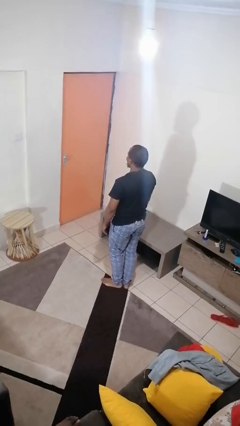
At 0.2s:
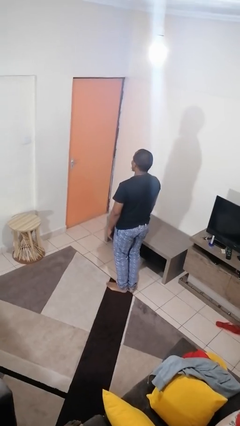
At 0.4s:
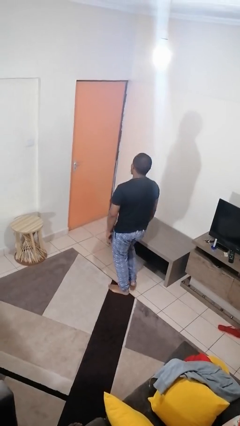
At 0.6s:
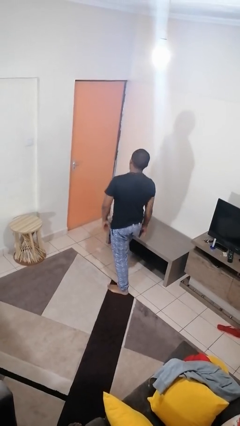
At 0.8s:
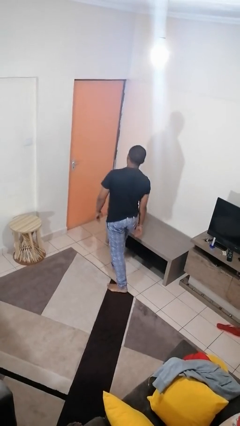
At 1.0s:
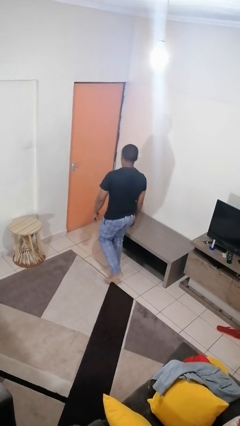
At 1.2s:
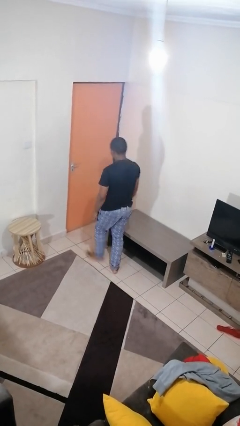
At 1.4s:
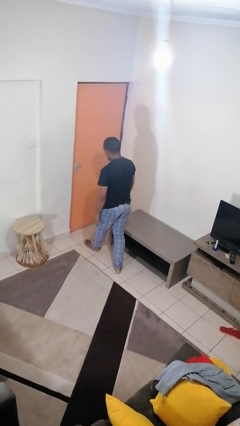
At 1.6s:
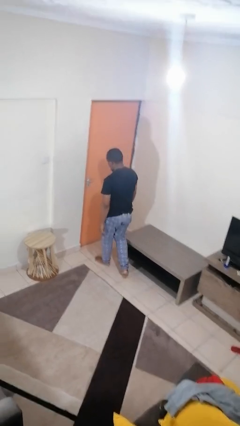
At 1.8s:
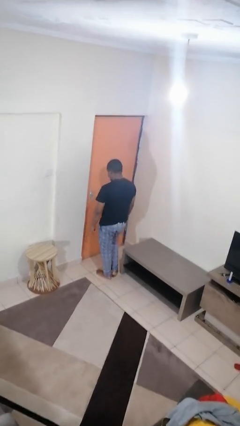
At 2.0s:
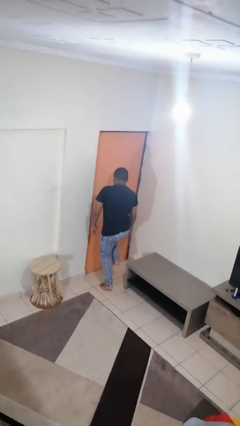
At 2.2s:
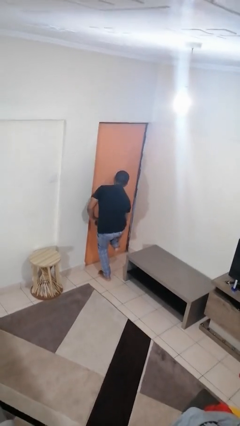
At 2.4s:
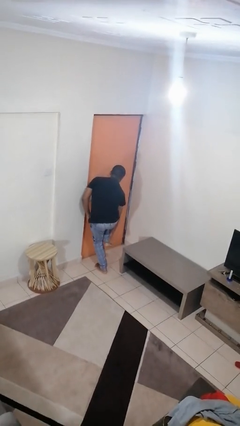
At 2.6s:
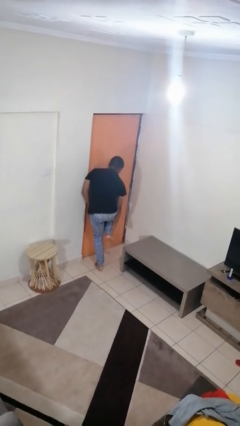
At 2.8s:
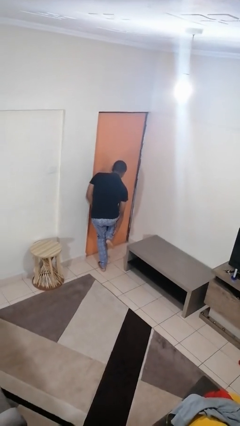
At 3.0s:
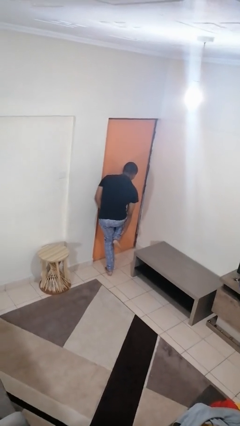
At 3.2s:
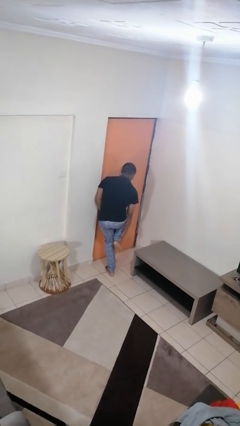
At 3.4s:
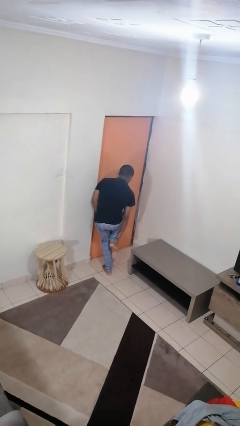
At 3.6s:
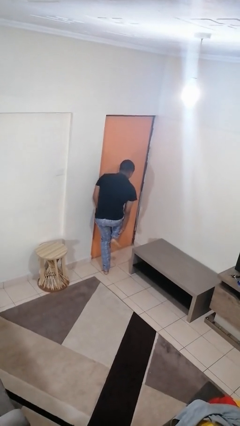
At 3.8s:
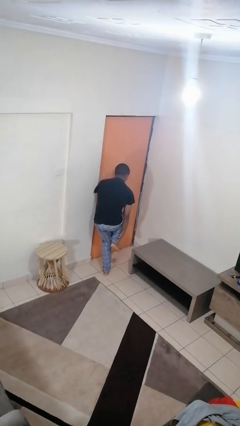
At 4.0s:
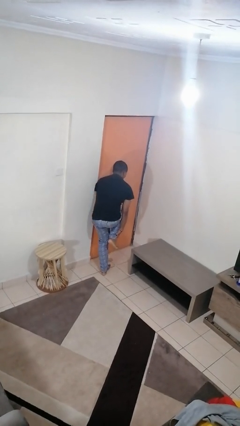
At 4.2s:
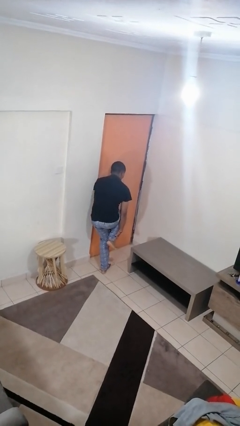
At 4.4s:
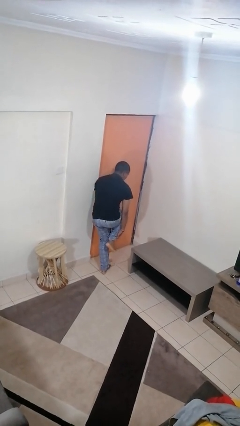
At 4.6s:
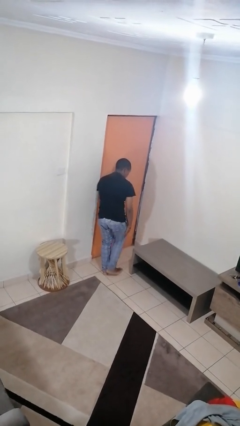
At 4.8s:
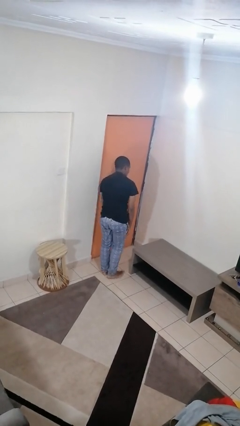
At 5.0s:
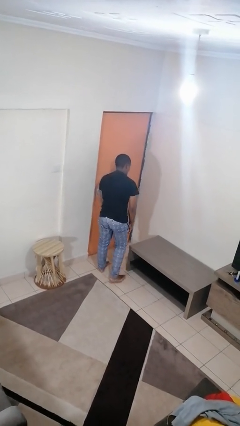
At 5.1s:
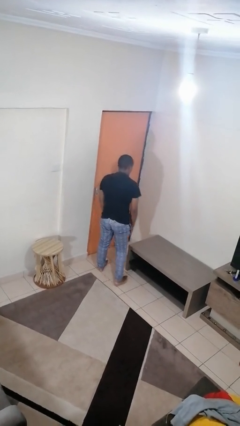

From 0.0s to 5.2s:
person stubs toe

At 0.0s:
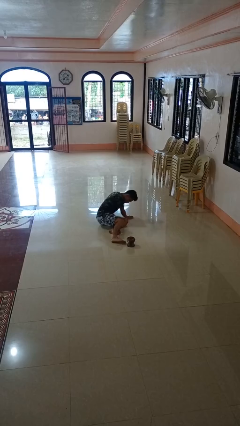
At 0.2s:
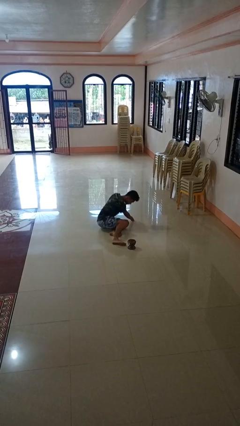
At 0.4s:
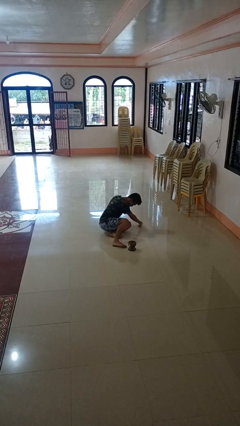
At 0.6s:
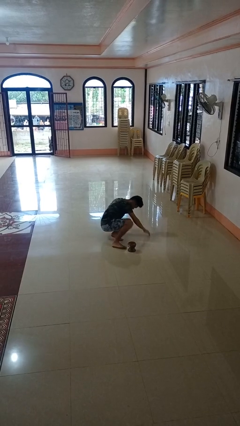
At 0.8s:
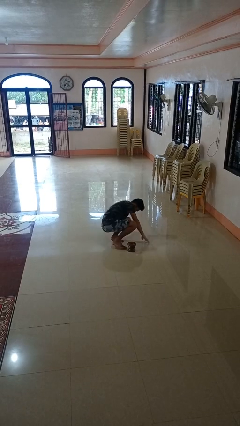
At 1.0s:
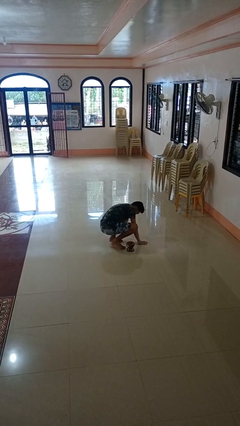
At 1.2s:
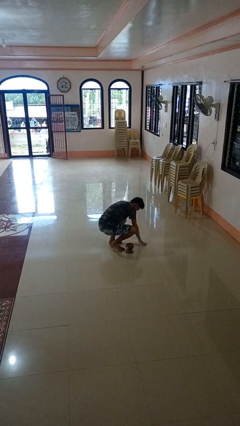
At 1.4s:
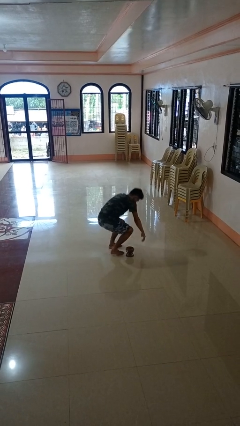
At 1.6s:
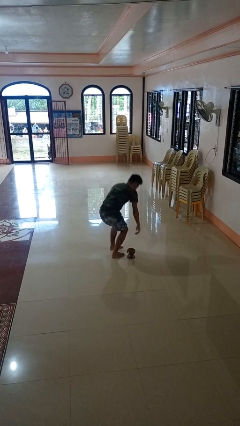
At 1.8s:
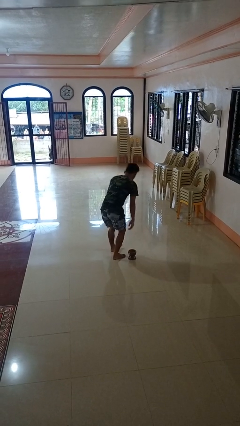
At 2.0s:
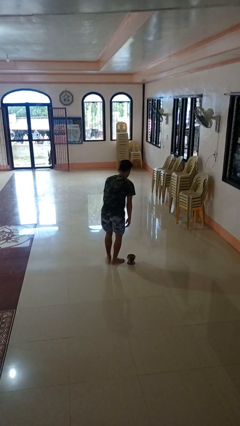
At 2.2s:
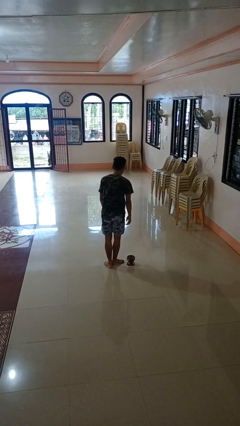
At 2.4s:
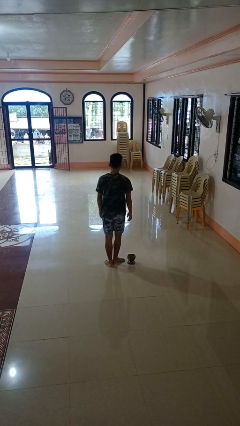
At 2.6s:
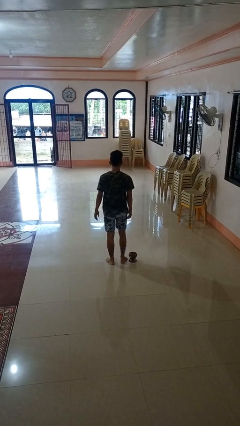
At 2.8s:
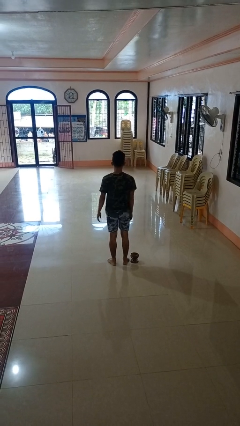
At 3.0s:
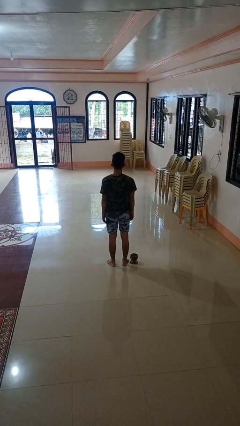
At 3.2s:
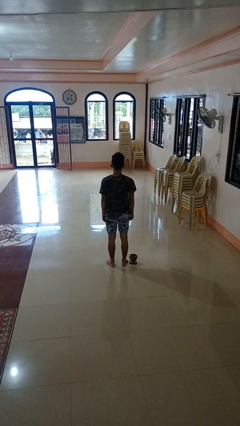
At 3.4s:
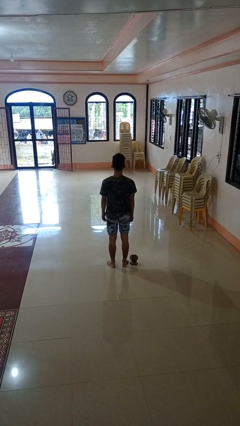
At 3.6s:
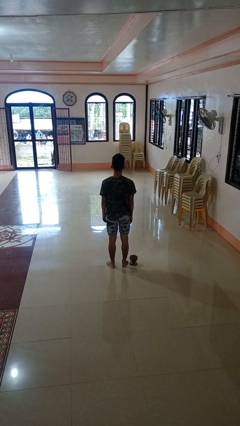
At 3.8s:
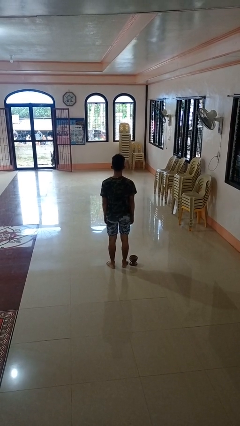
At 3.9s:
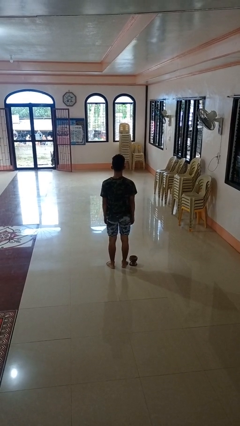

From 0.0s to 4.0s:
person stands up from floor

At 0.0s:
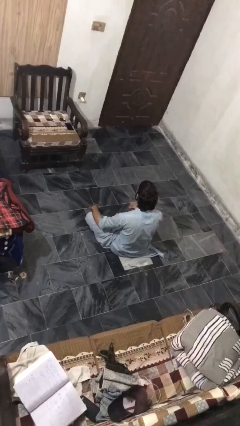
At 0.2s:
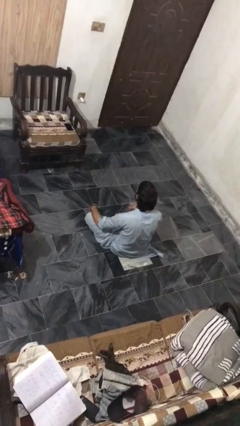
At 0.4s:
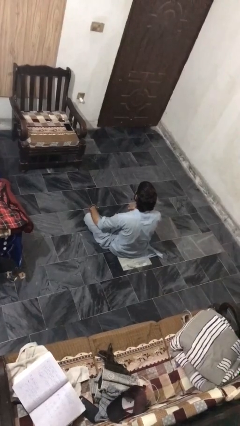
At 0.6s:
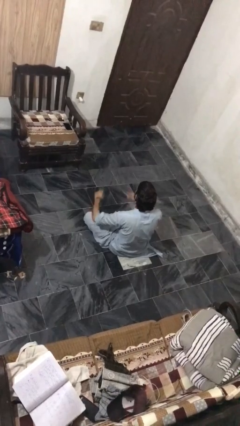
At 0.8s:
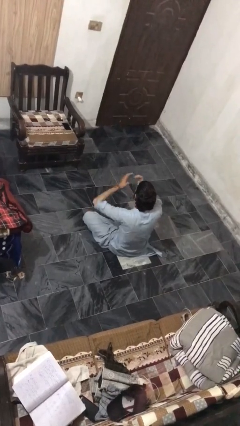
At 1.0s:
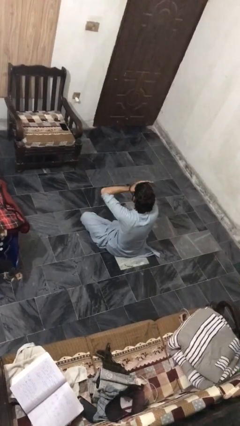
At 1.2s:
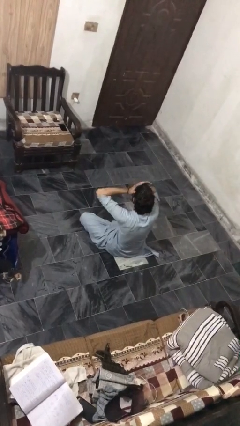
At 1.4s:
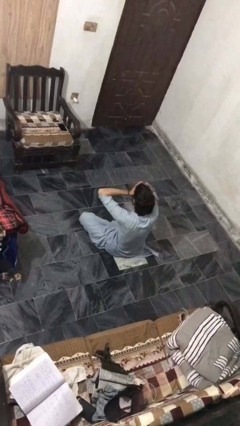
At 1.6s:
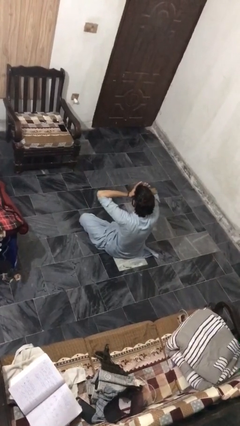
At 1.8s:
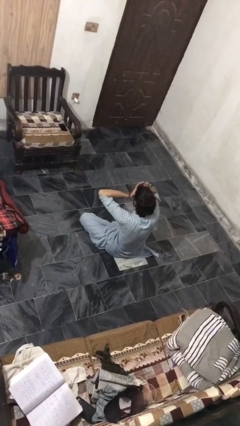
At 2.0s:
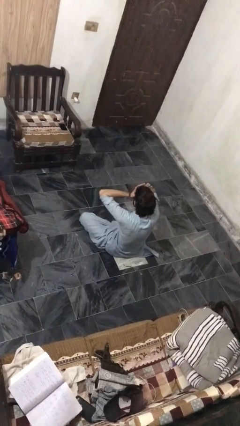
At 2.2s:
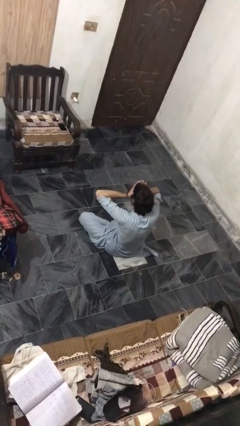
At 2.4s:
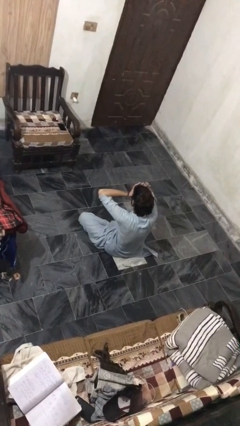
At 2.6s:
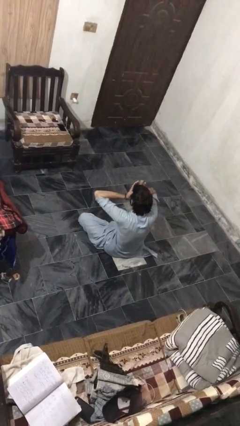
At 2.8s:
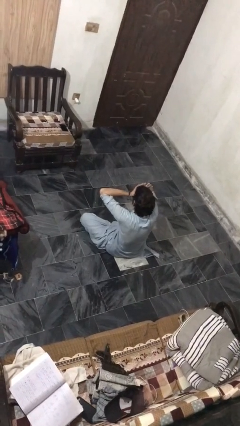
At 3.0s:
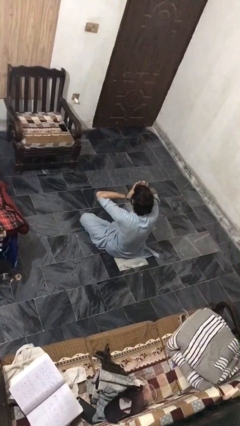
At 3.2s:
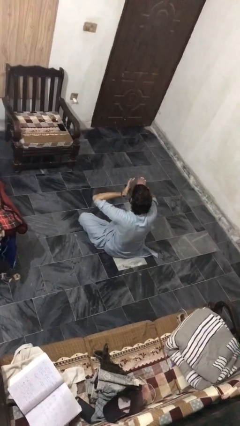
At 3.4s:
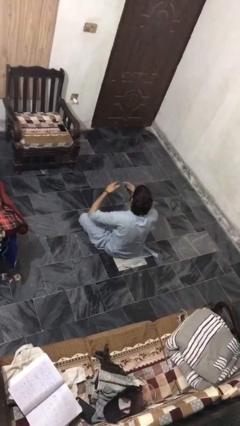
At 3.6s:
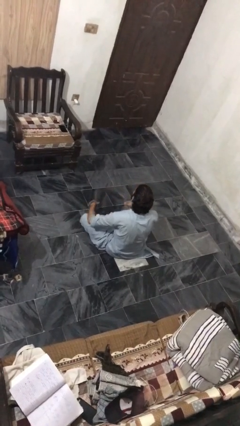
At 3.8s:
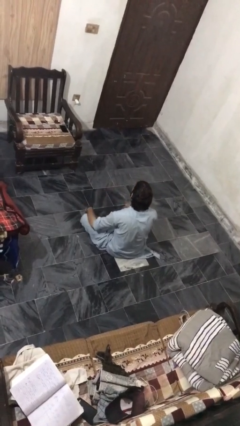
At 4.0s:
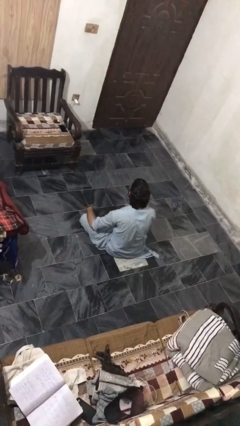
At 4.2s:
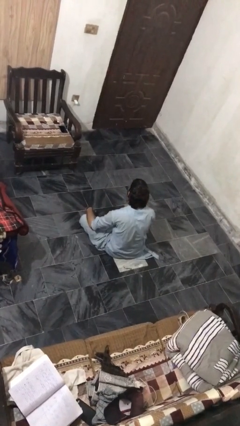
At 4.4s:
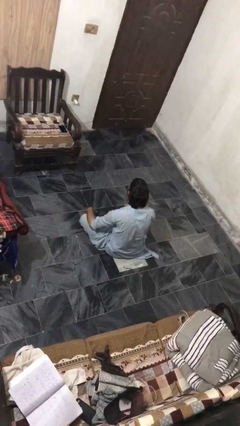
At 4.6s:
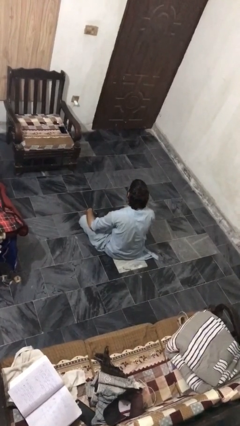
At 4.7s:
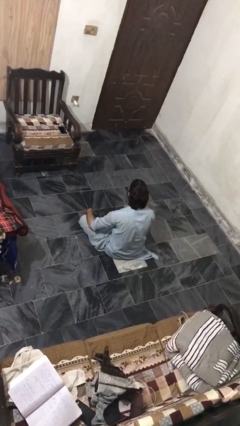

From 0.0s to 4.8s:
person rubs eyes

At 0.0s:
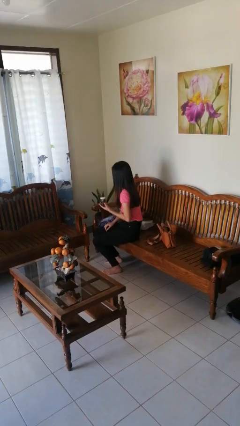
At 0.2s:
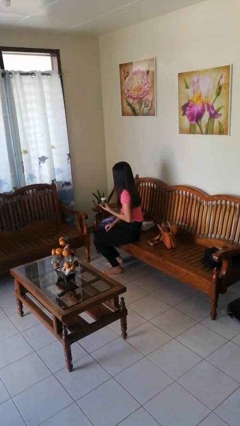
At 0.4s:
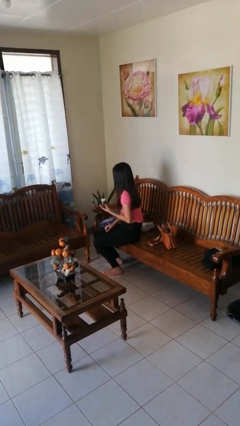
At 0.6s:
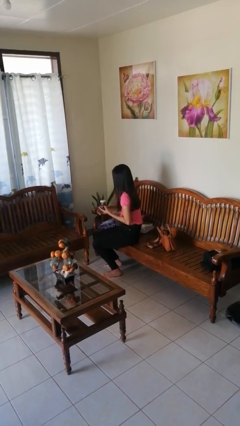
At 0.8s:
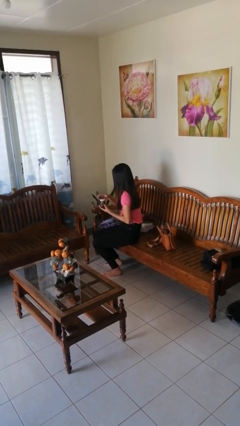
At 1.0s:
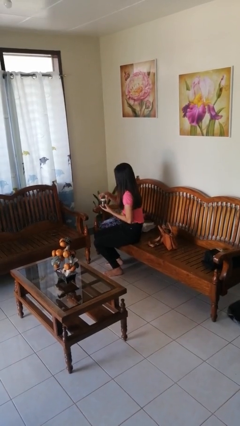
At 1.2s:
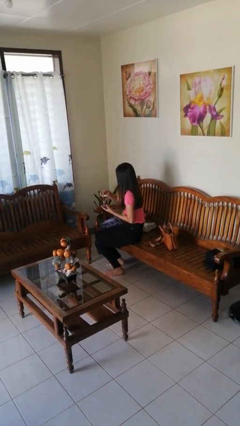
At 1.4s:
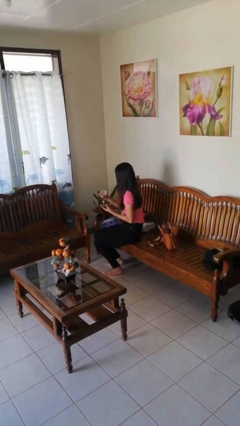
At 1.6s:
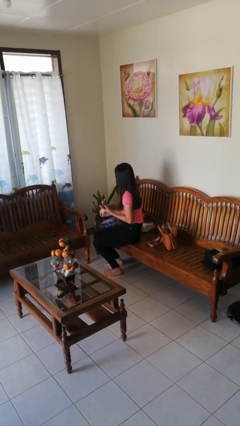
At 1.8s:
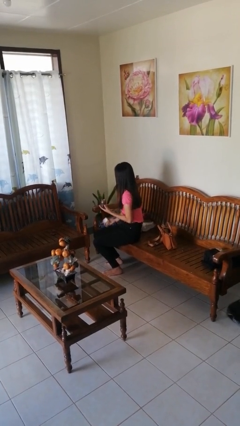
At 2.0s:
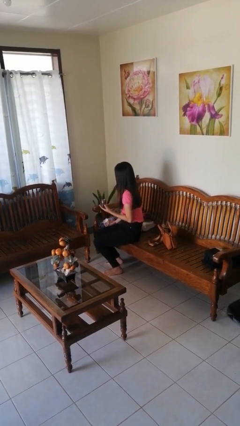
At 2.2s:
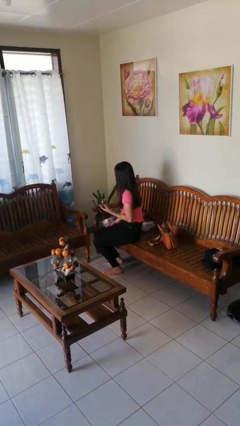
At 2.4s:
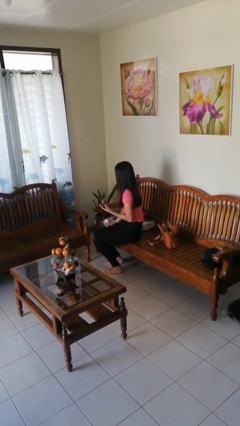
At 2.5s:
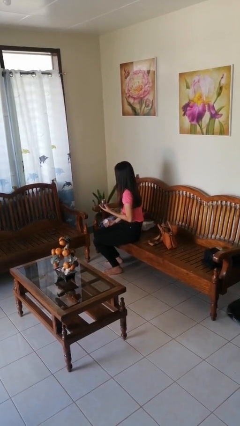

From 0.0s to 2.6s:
person opens jar

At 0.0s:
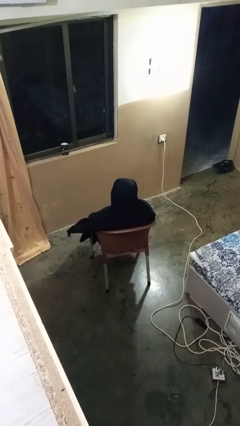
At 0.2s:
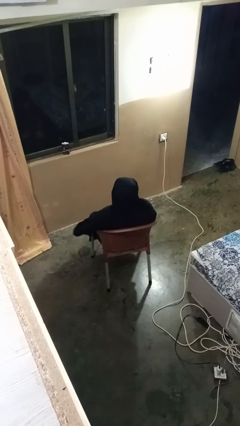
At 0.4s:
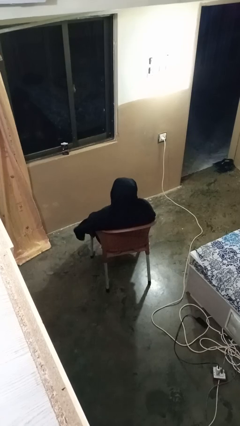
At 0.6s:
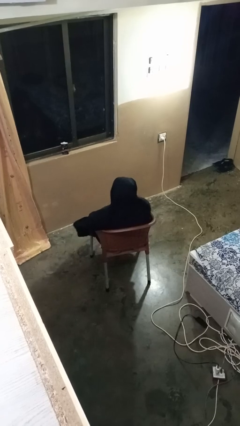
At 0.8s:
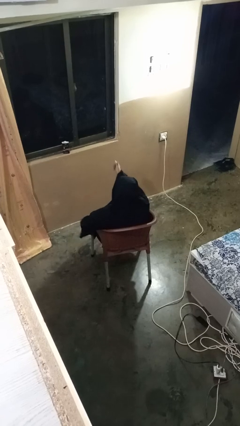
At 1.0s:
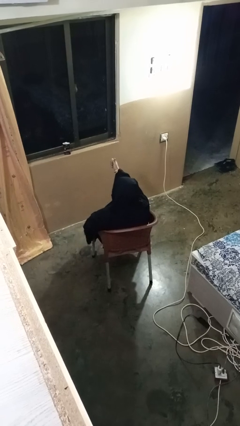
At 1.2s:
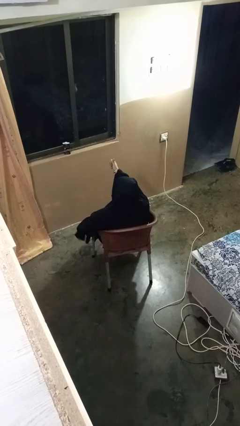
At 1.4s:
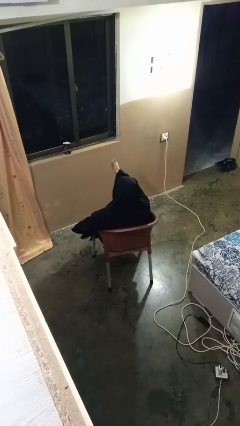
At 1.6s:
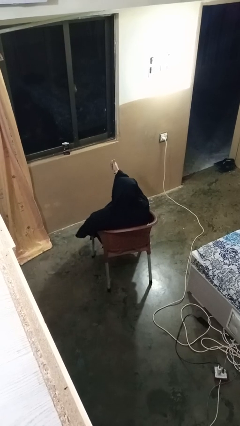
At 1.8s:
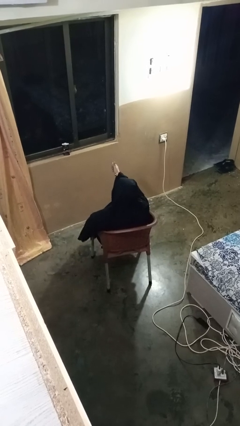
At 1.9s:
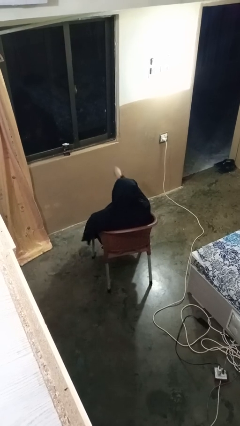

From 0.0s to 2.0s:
person gestures thumbs up
